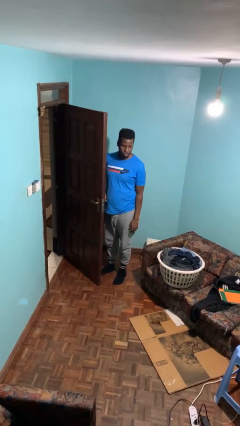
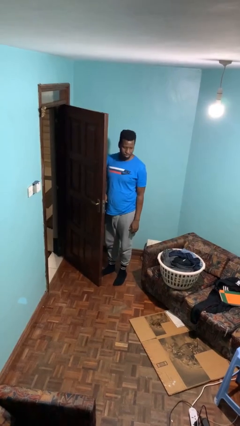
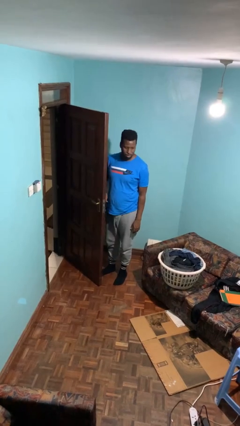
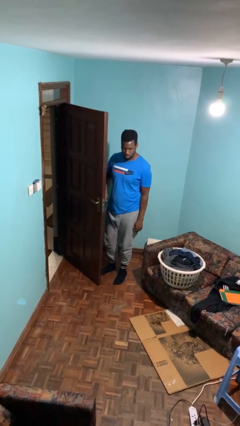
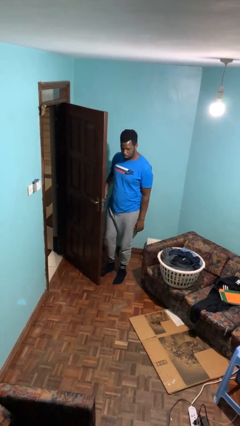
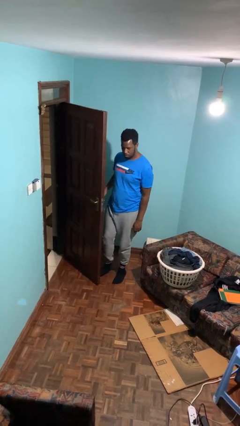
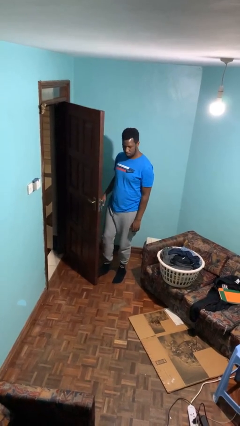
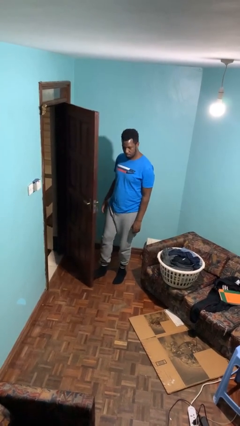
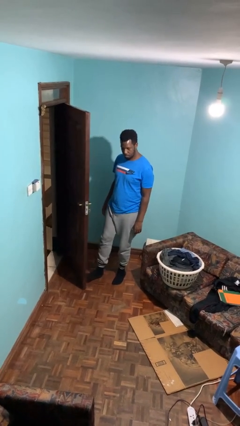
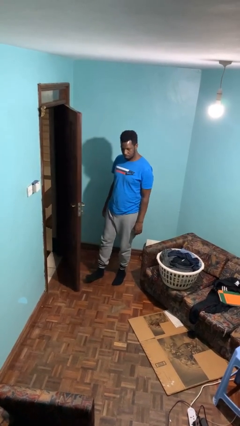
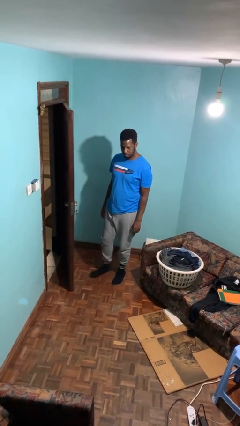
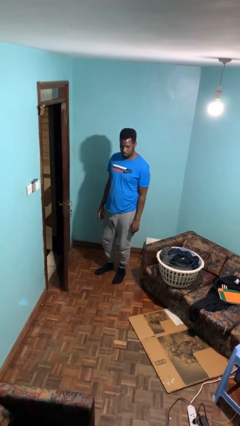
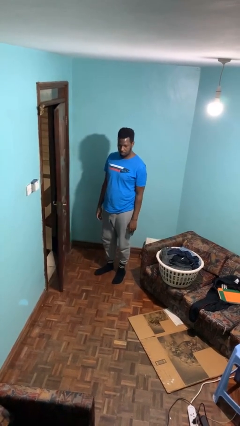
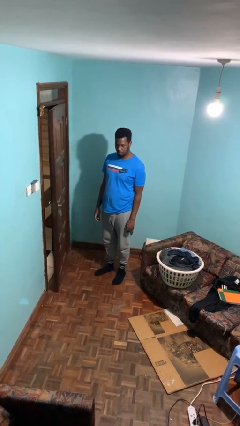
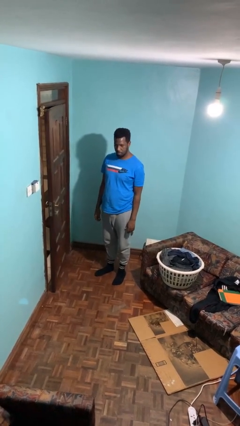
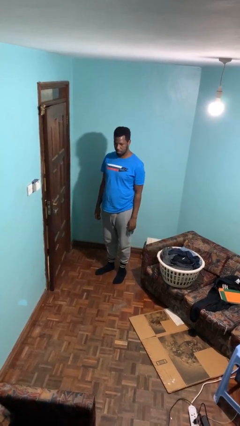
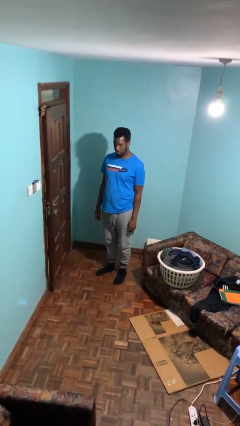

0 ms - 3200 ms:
person closes door with foot

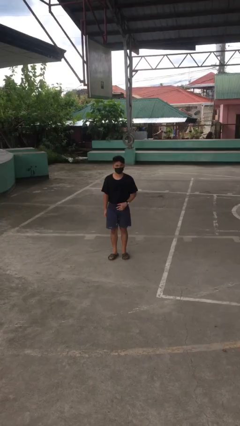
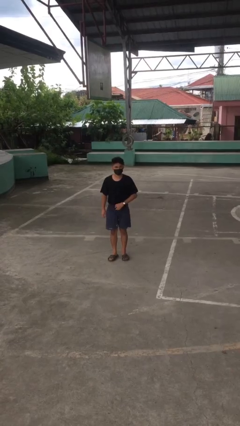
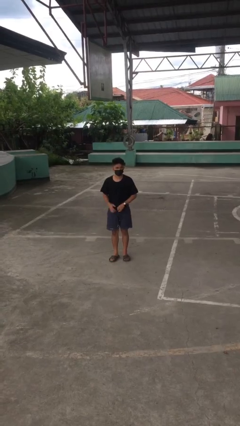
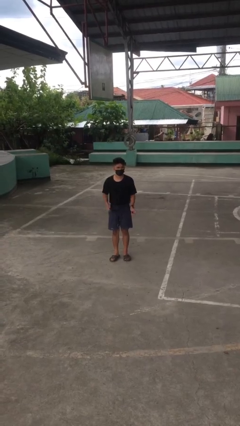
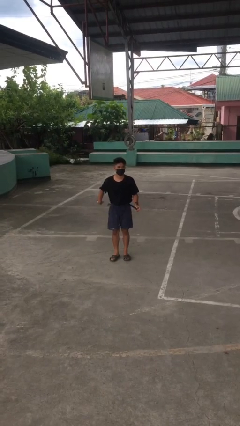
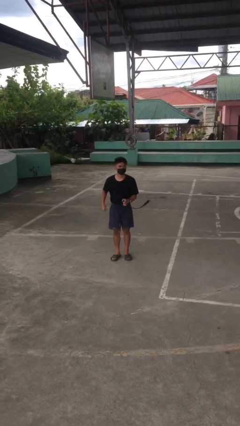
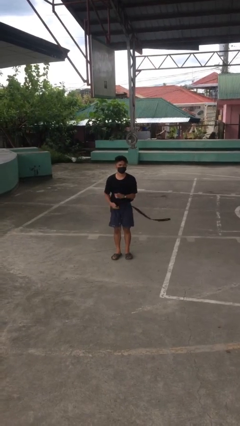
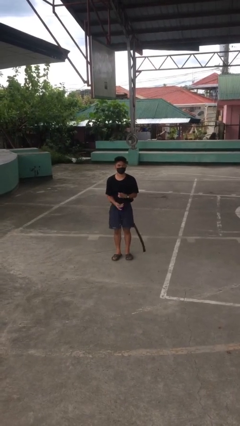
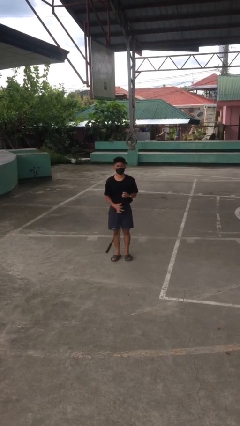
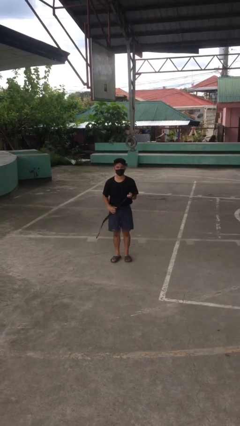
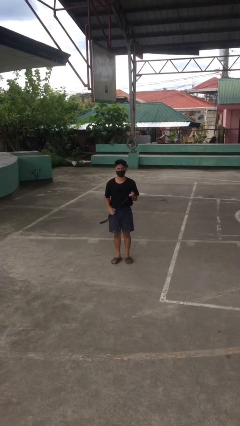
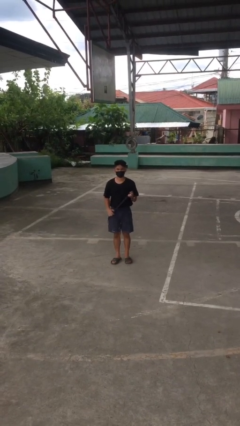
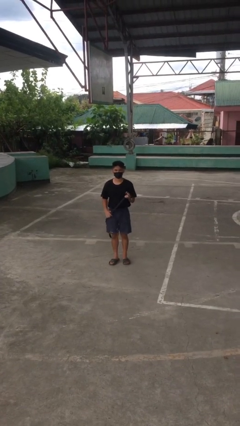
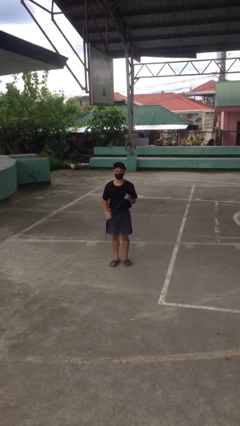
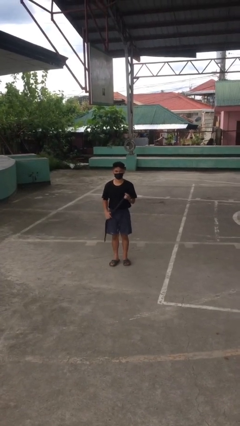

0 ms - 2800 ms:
person takes off belt

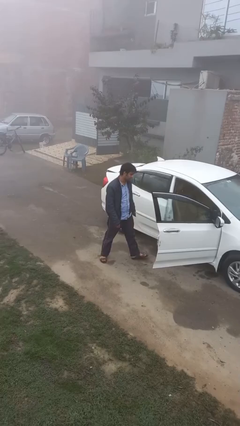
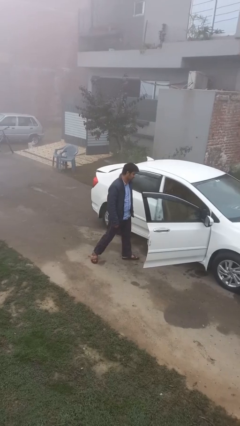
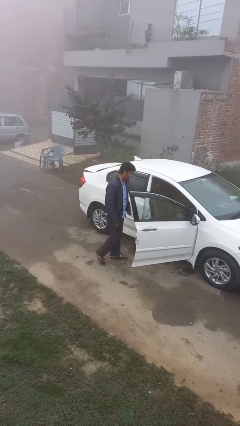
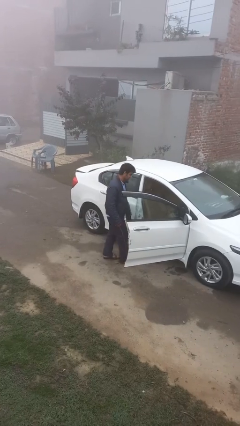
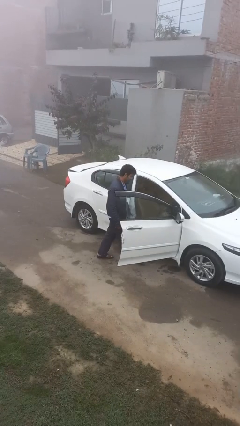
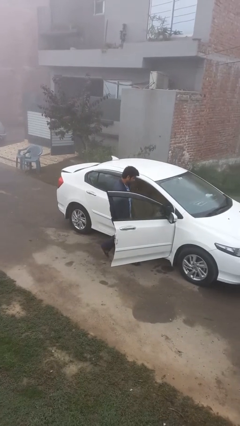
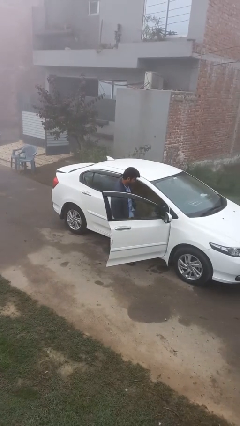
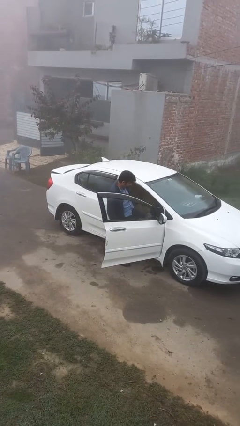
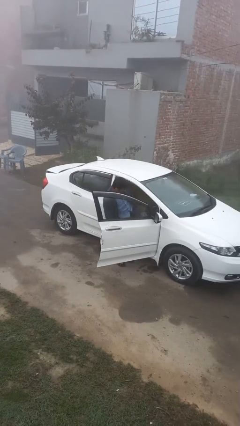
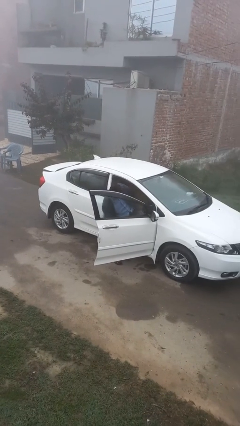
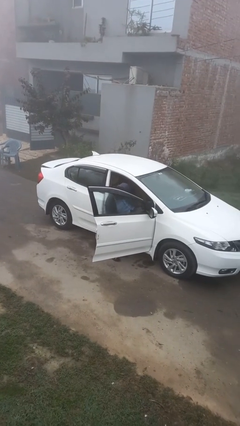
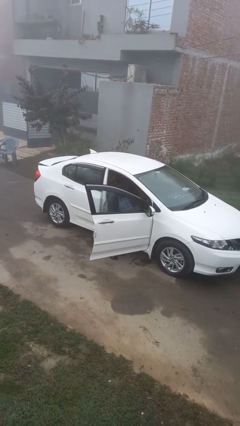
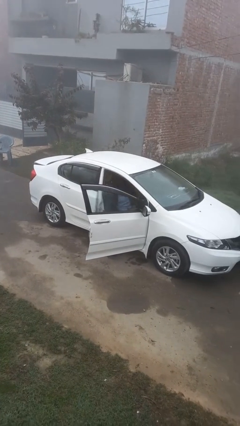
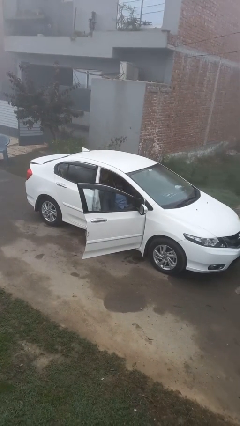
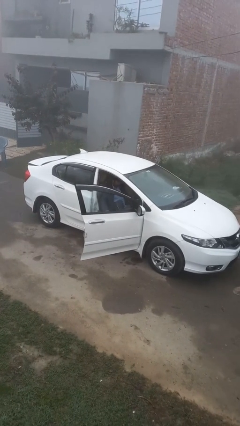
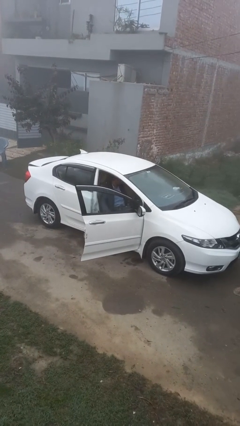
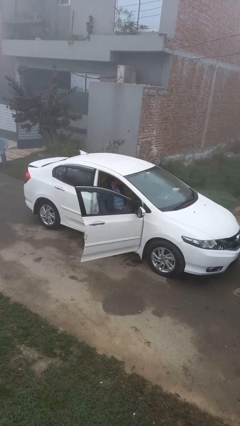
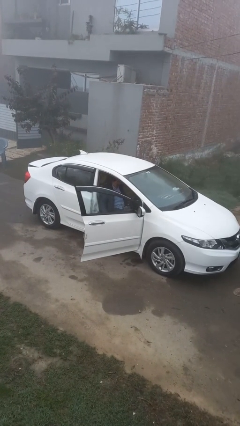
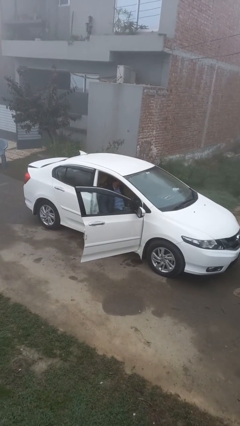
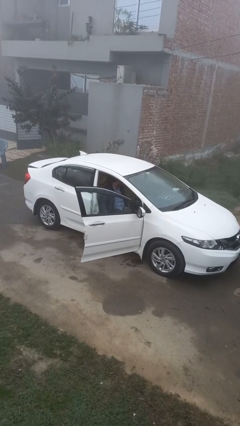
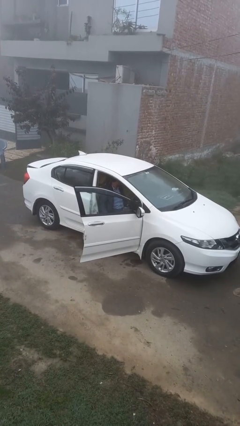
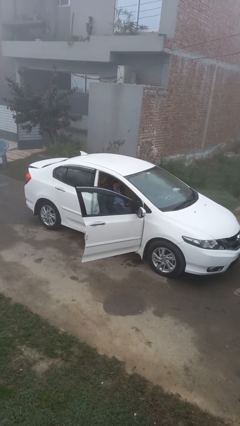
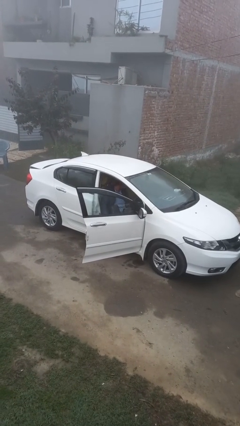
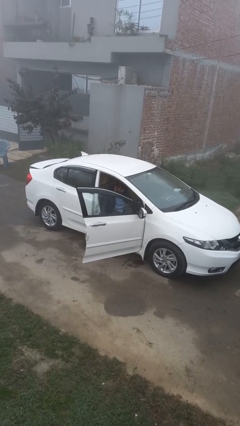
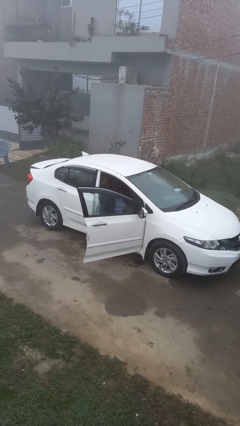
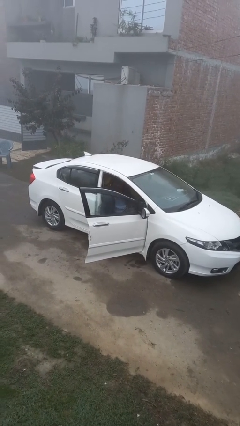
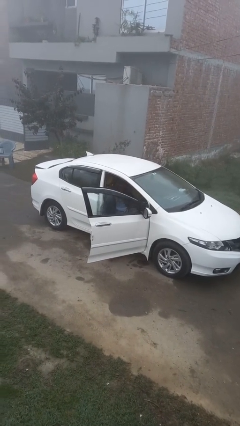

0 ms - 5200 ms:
person enters car

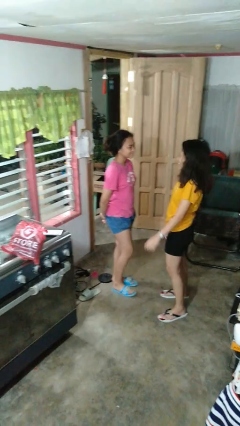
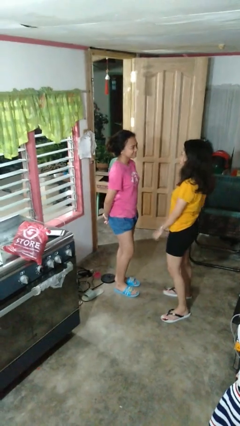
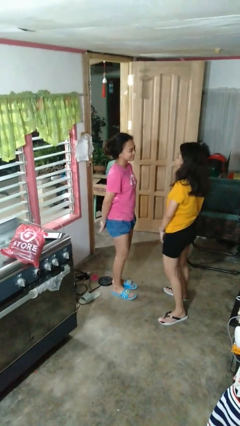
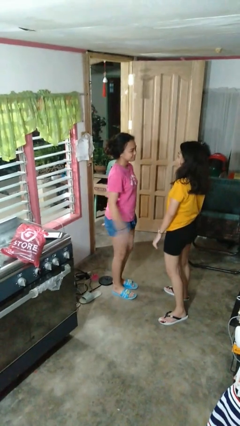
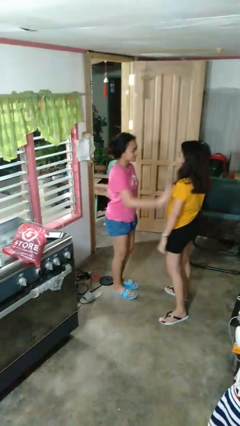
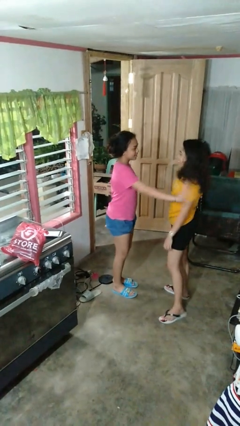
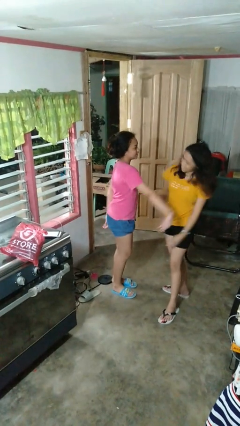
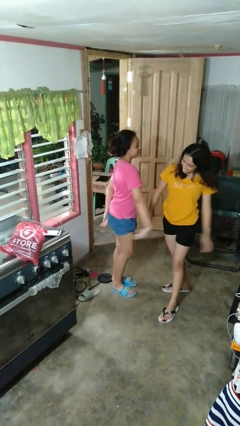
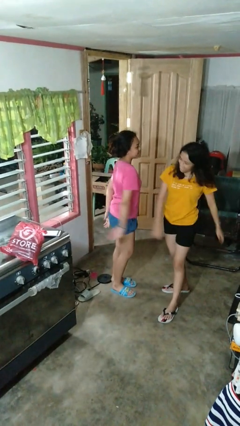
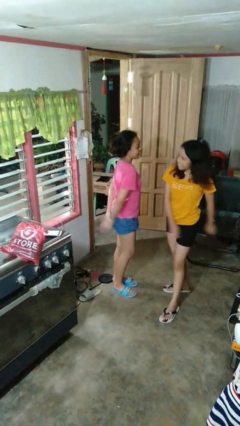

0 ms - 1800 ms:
person shoves person

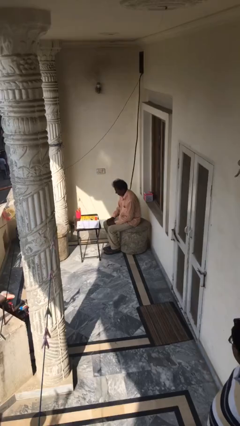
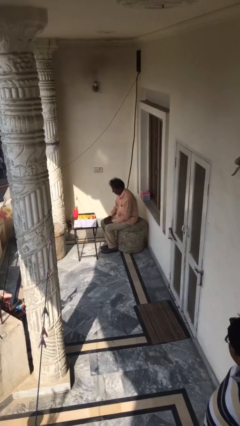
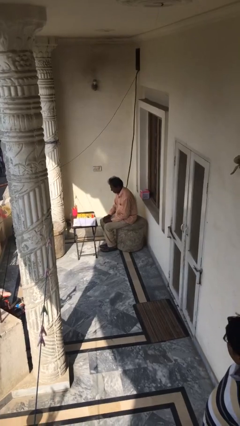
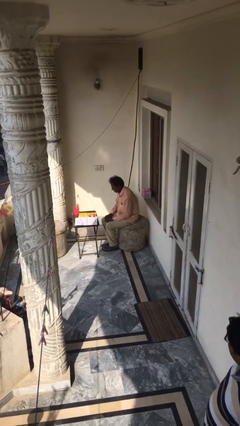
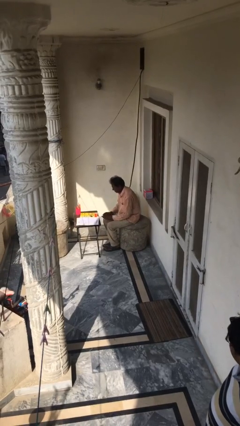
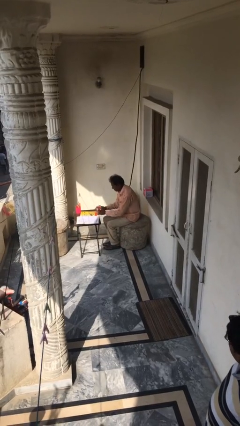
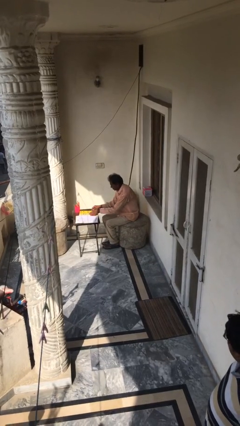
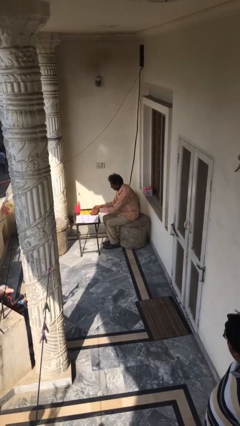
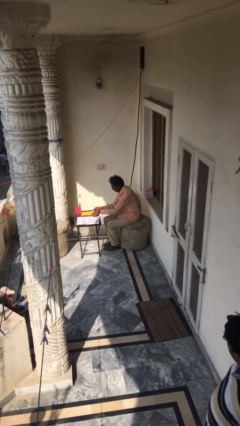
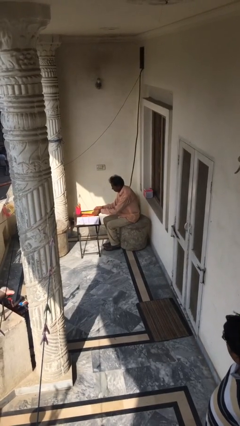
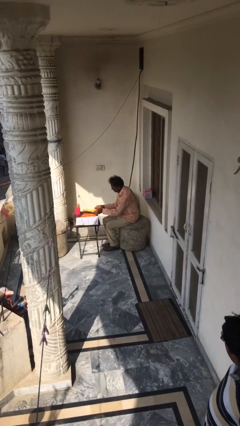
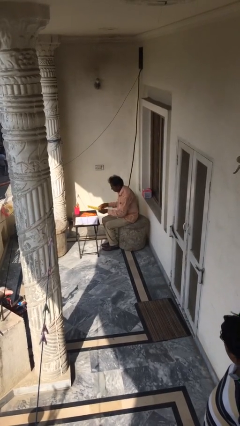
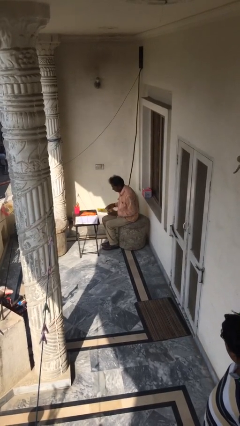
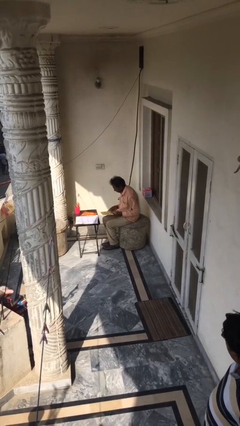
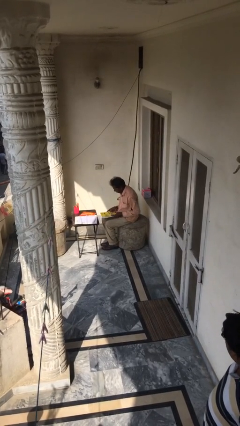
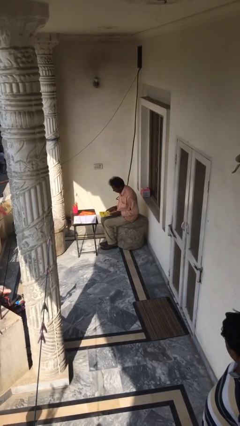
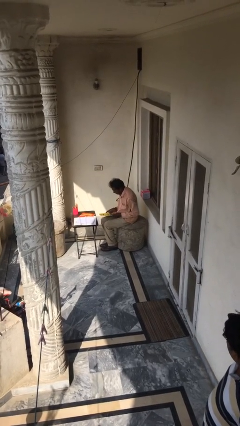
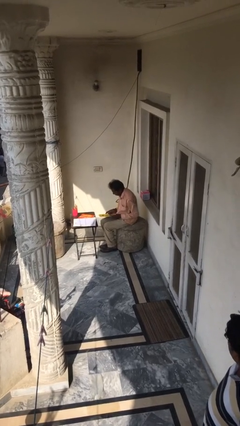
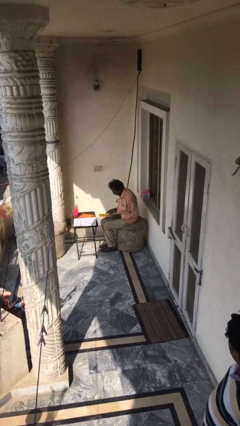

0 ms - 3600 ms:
person picks up object from table

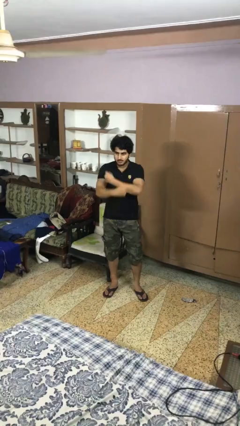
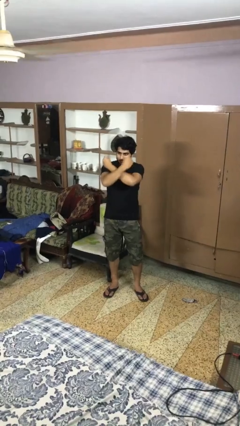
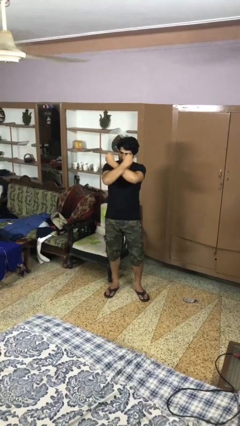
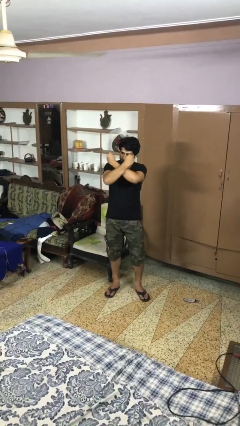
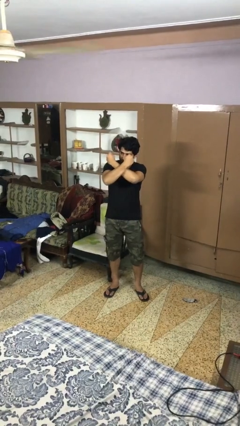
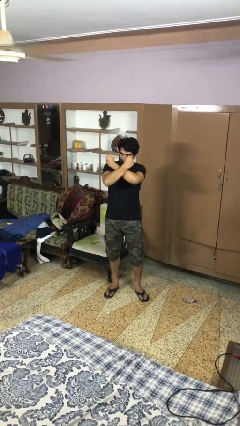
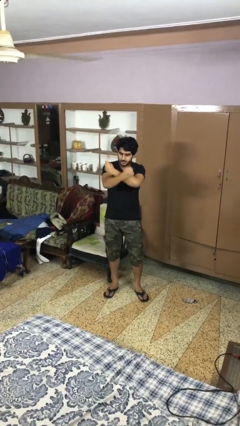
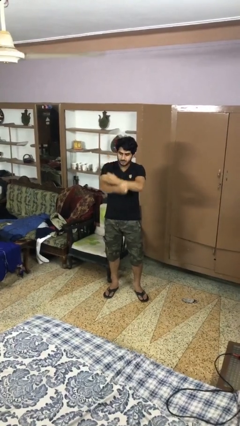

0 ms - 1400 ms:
person gestures arms x
